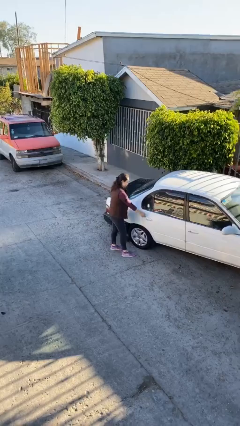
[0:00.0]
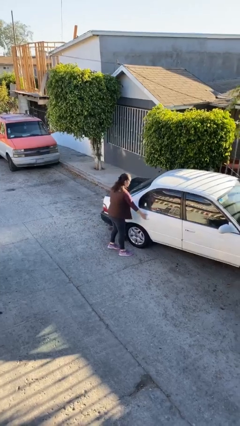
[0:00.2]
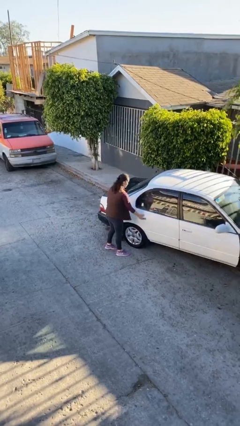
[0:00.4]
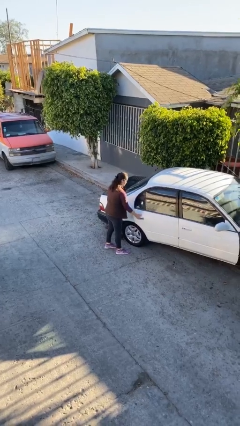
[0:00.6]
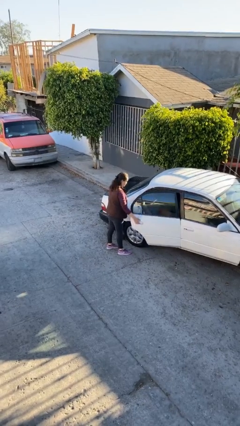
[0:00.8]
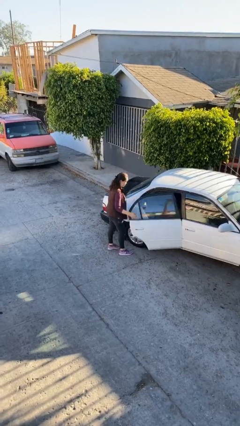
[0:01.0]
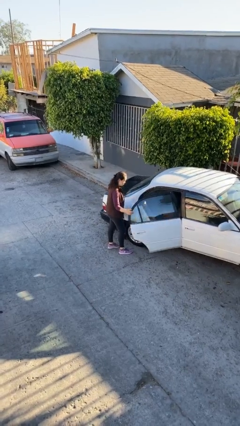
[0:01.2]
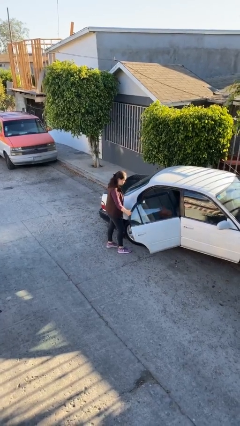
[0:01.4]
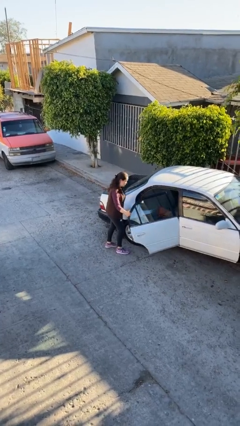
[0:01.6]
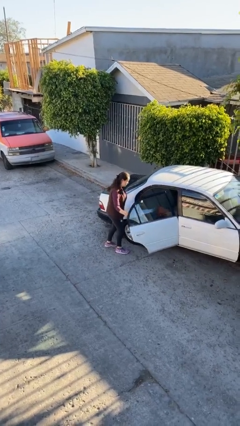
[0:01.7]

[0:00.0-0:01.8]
person opens car door

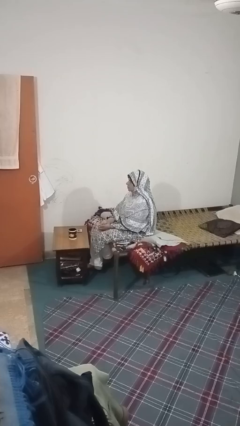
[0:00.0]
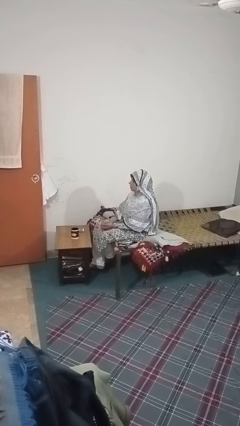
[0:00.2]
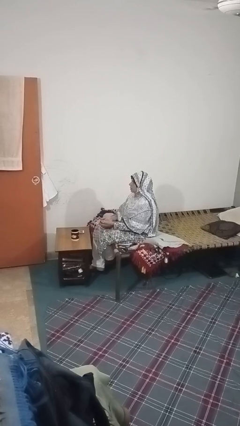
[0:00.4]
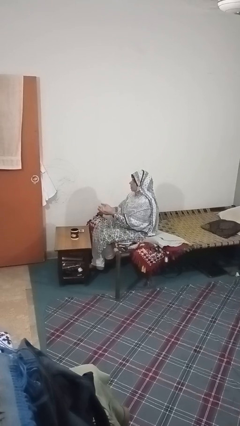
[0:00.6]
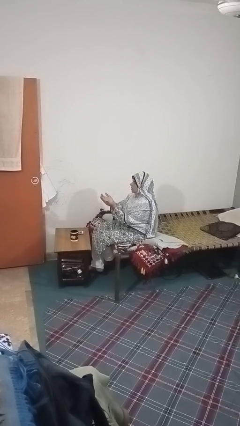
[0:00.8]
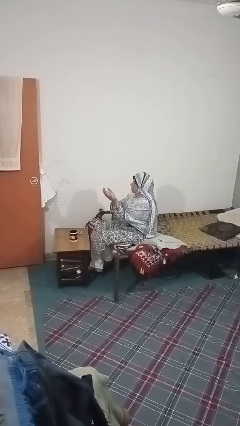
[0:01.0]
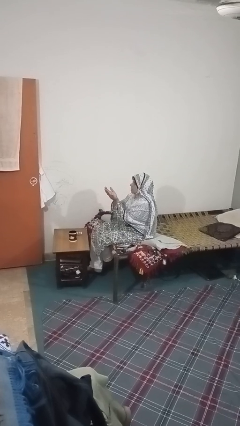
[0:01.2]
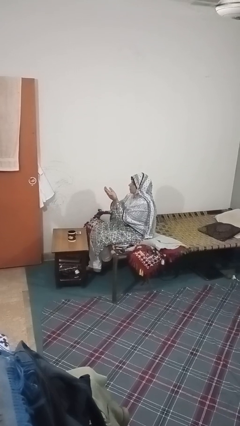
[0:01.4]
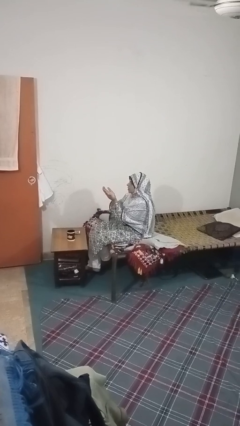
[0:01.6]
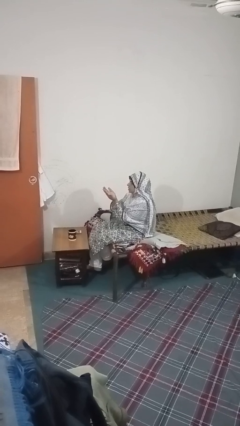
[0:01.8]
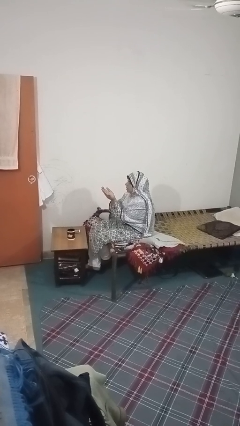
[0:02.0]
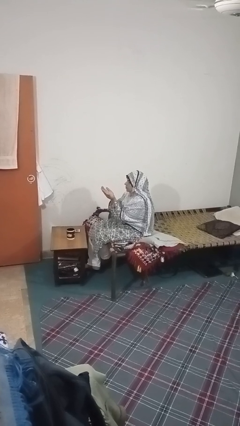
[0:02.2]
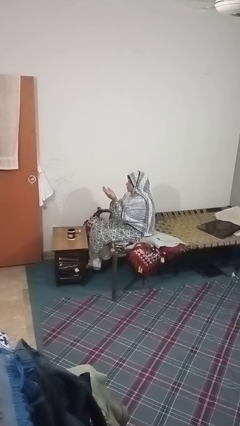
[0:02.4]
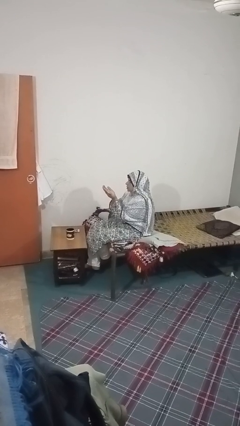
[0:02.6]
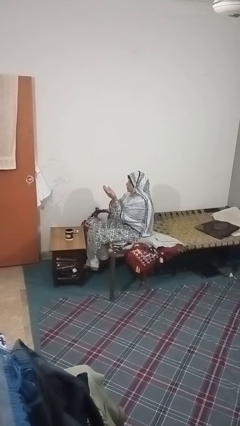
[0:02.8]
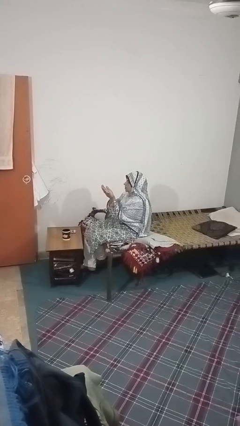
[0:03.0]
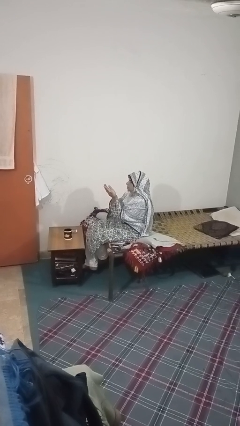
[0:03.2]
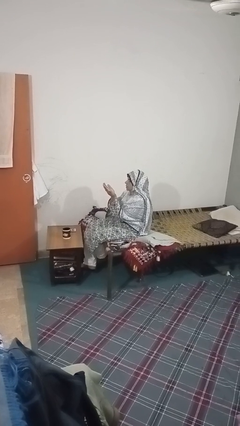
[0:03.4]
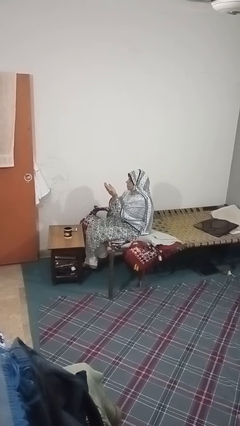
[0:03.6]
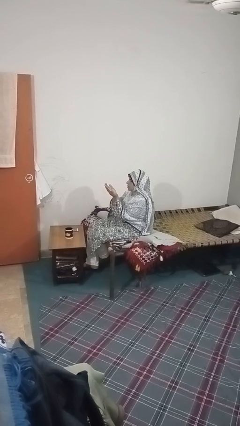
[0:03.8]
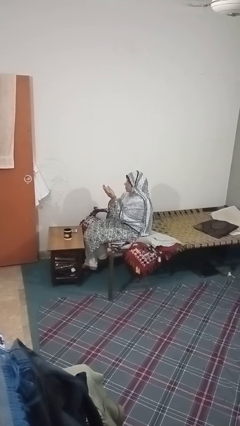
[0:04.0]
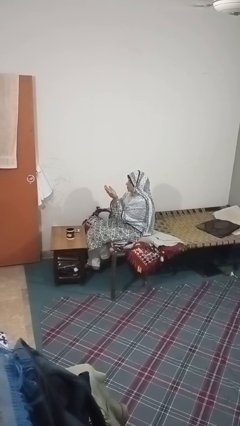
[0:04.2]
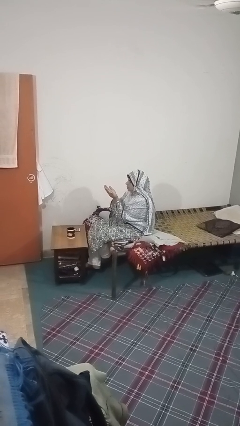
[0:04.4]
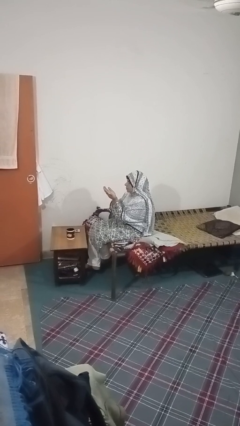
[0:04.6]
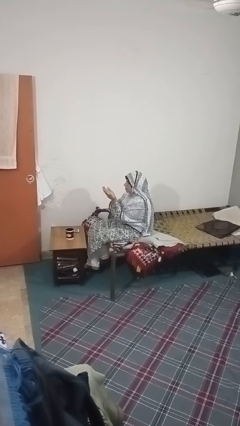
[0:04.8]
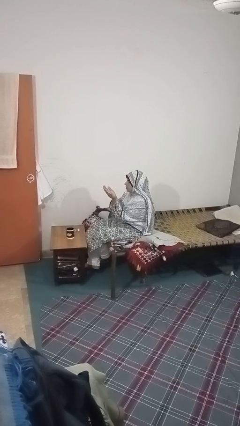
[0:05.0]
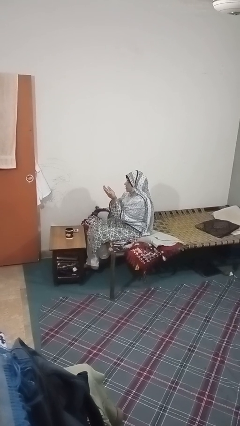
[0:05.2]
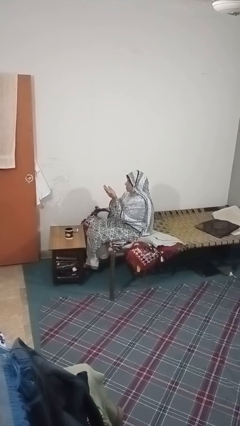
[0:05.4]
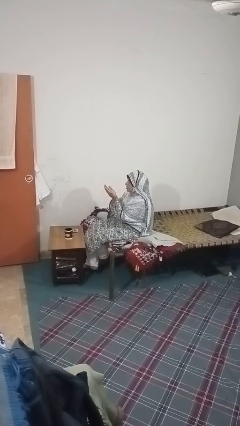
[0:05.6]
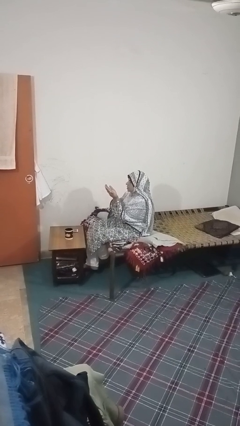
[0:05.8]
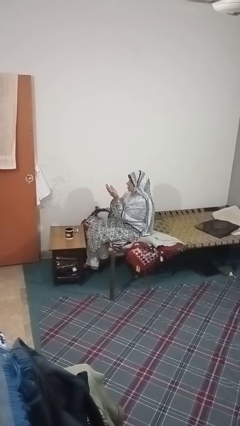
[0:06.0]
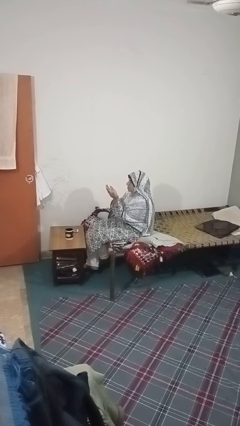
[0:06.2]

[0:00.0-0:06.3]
person prays

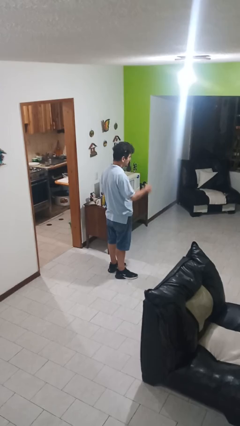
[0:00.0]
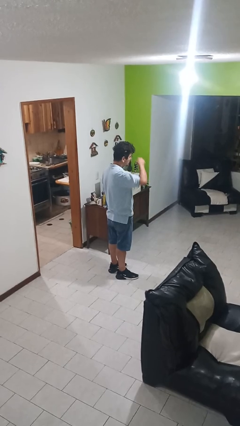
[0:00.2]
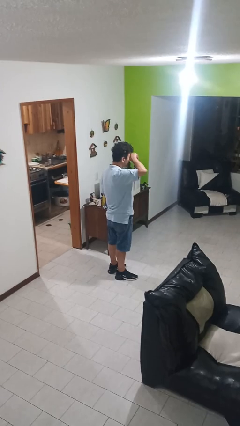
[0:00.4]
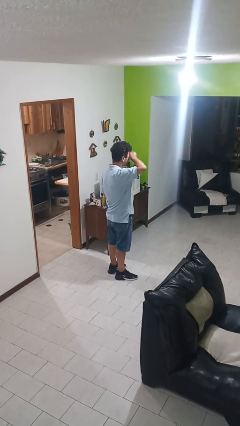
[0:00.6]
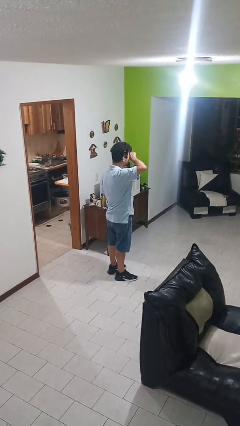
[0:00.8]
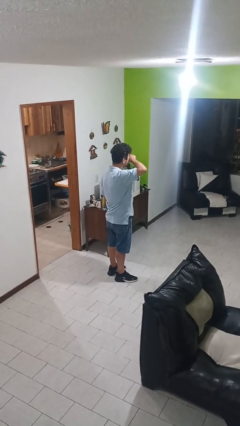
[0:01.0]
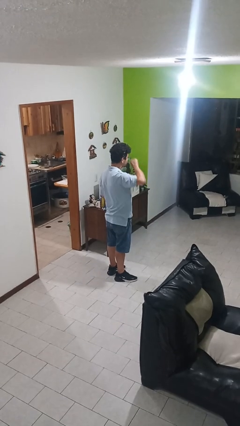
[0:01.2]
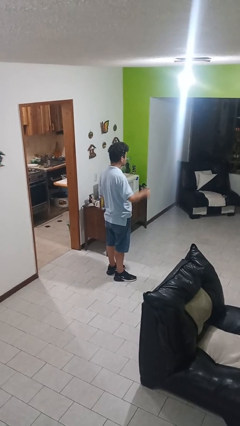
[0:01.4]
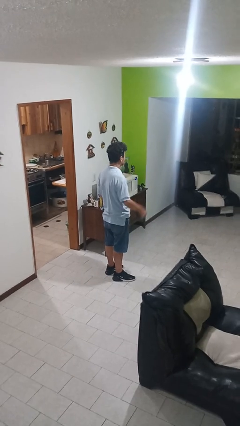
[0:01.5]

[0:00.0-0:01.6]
person rubs eyes

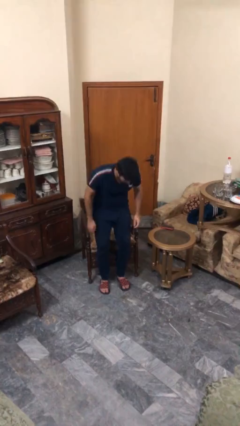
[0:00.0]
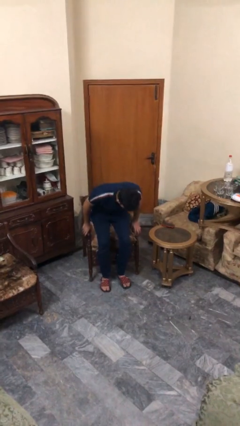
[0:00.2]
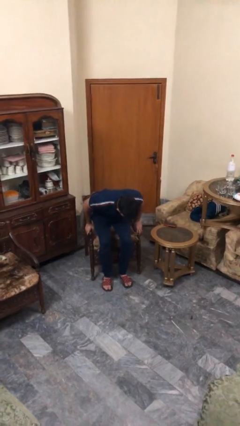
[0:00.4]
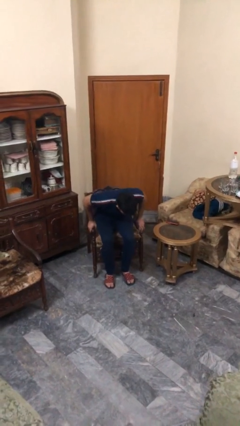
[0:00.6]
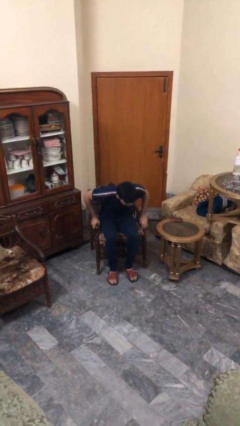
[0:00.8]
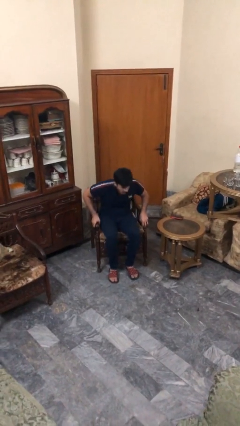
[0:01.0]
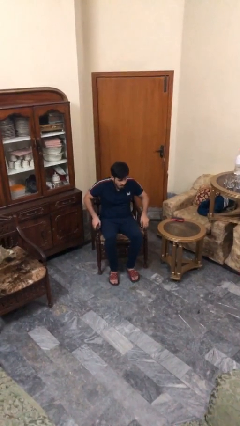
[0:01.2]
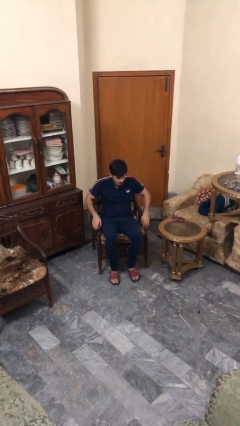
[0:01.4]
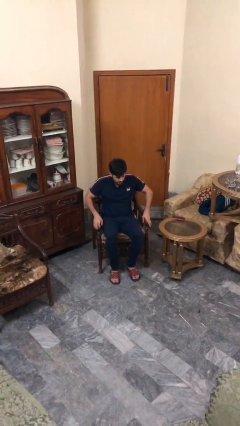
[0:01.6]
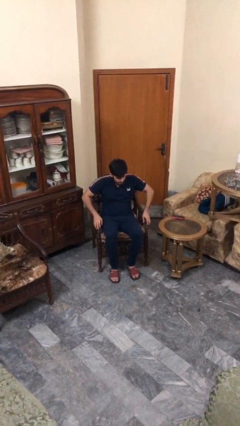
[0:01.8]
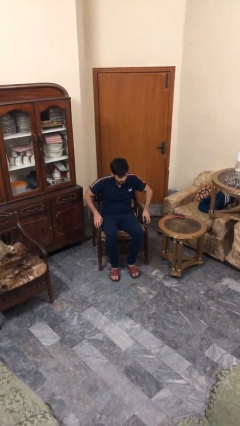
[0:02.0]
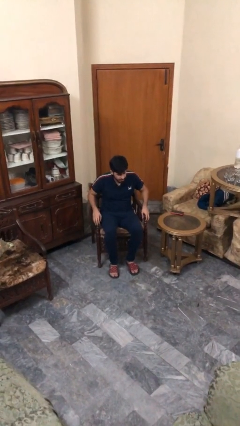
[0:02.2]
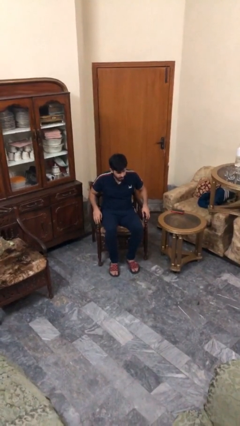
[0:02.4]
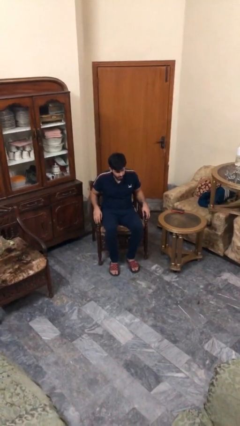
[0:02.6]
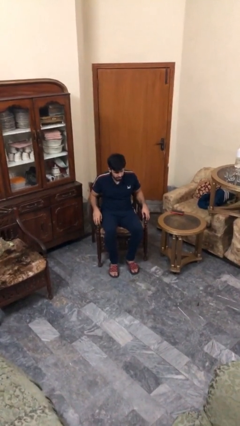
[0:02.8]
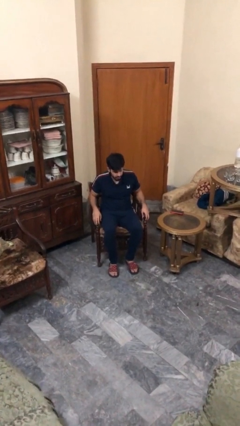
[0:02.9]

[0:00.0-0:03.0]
person sits down

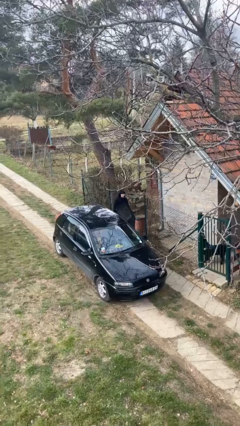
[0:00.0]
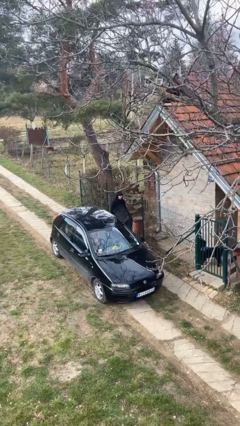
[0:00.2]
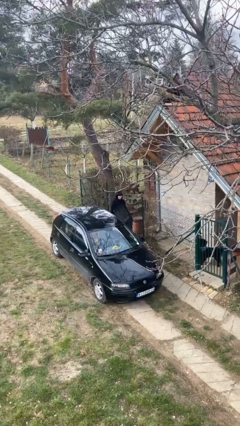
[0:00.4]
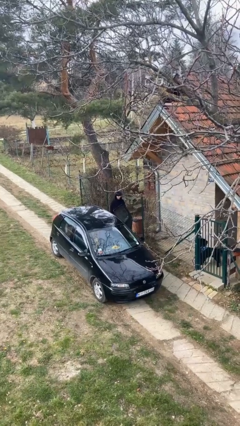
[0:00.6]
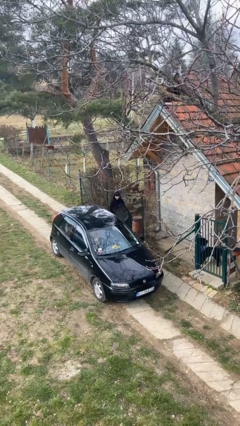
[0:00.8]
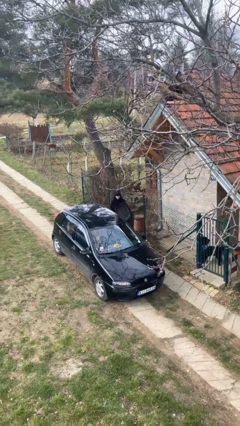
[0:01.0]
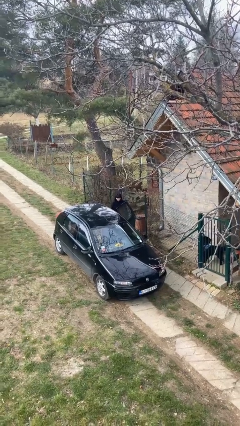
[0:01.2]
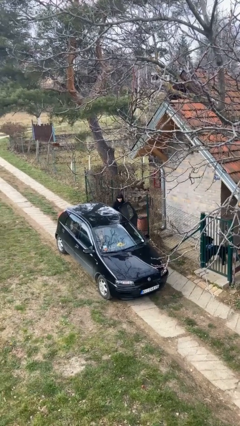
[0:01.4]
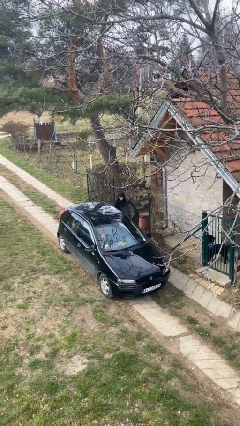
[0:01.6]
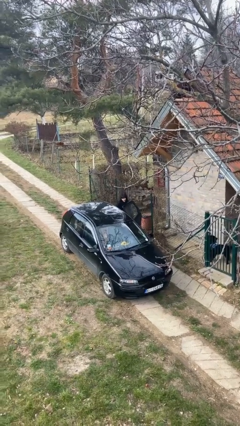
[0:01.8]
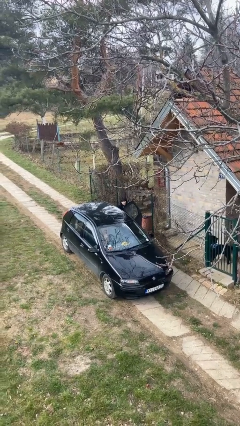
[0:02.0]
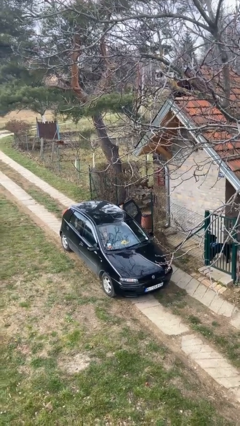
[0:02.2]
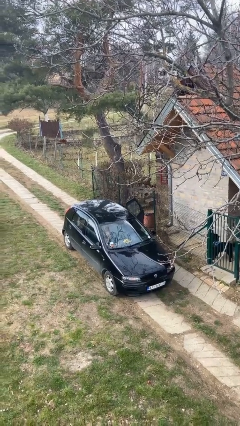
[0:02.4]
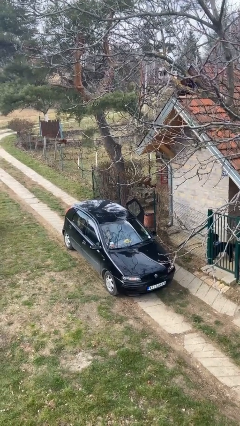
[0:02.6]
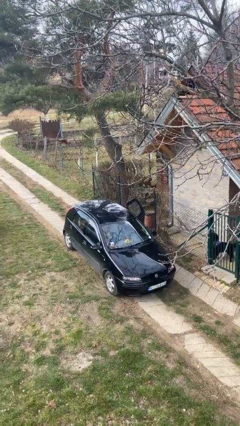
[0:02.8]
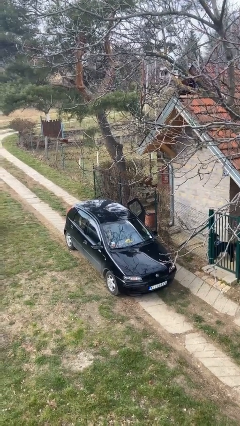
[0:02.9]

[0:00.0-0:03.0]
person enters car

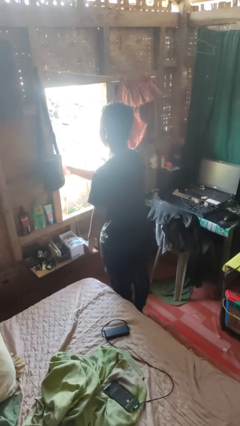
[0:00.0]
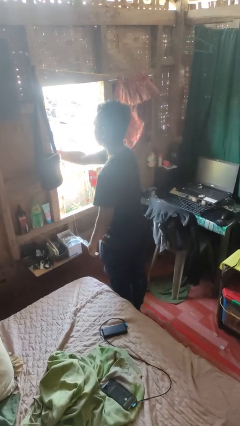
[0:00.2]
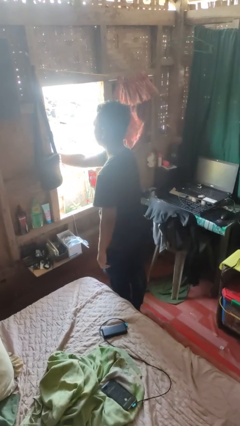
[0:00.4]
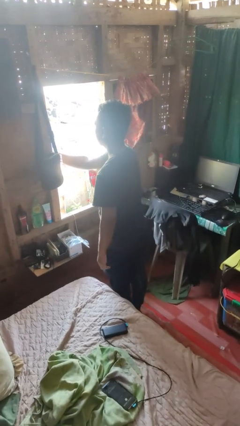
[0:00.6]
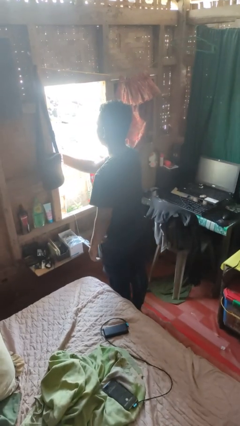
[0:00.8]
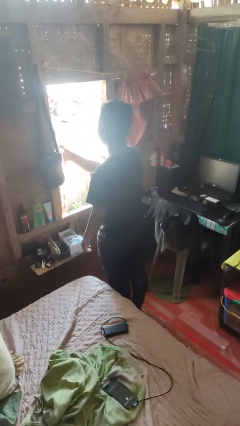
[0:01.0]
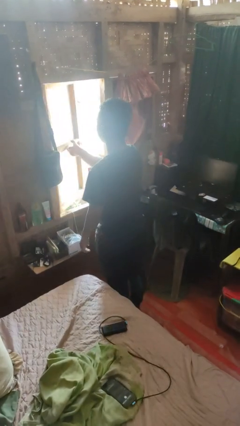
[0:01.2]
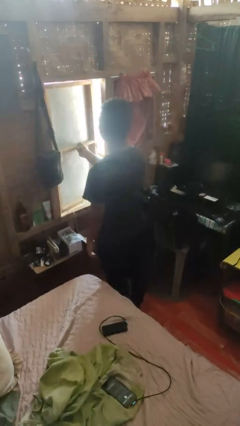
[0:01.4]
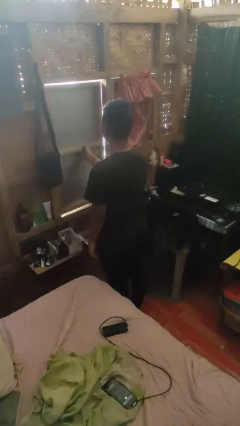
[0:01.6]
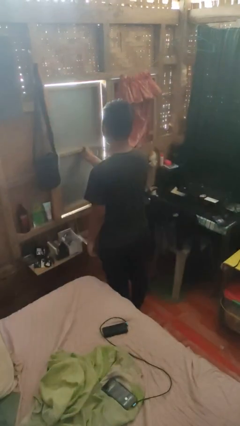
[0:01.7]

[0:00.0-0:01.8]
person closes home window
